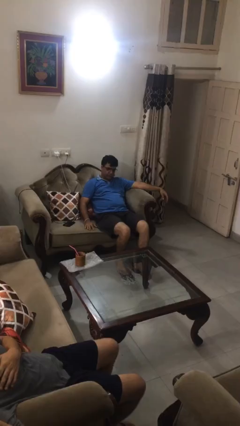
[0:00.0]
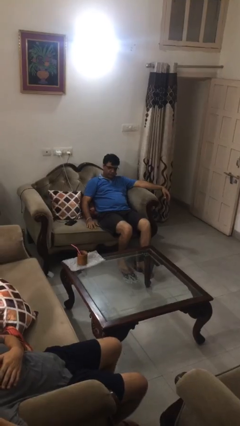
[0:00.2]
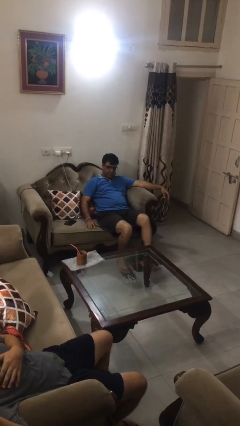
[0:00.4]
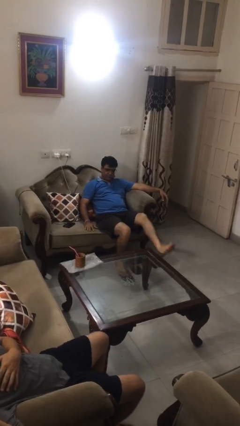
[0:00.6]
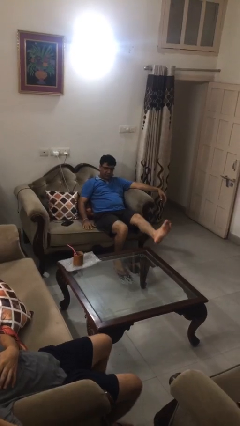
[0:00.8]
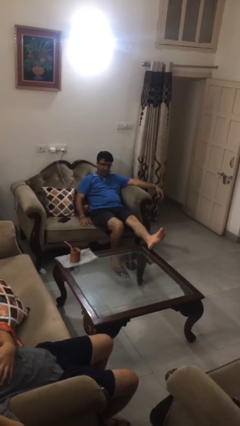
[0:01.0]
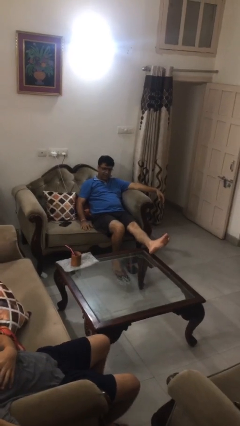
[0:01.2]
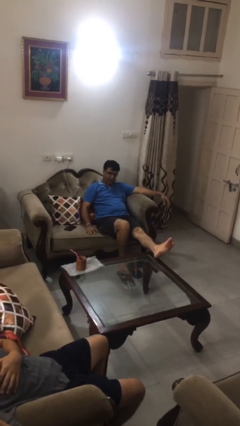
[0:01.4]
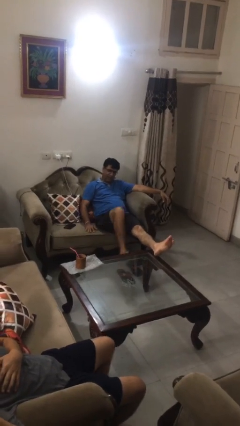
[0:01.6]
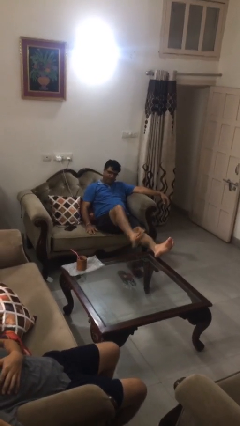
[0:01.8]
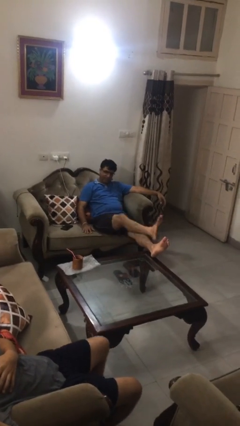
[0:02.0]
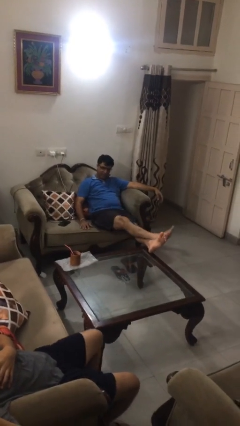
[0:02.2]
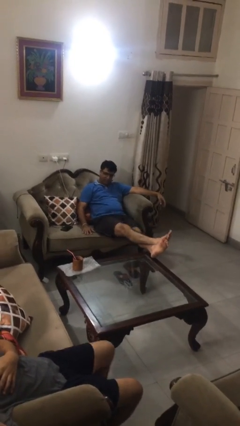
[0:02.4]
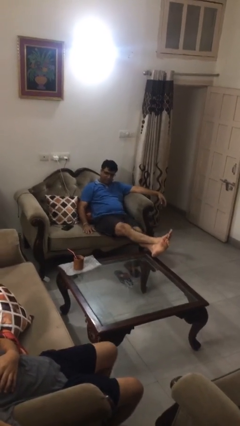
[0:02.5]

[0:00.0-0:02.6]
person puts feet up

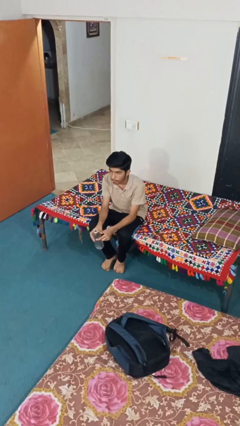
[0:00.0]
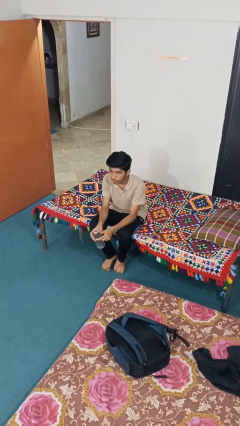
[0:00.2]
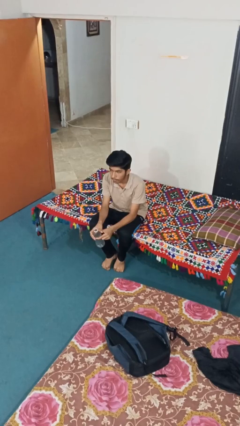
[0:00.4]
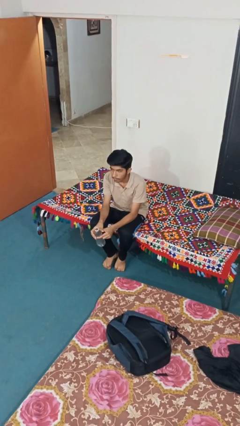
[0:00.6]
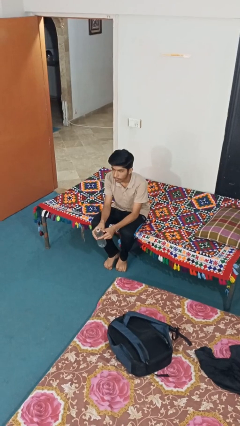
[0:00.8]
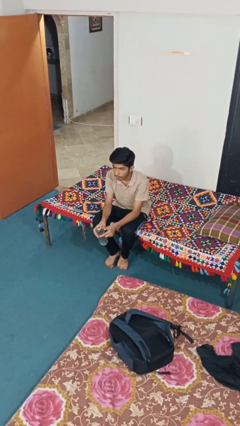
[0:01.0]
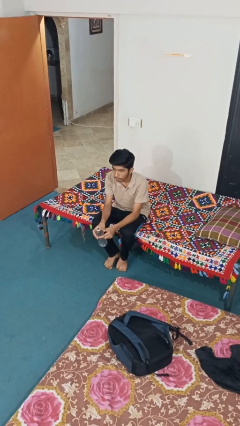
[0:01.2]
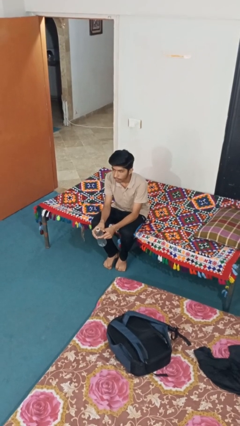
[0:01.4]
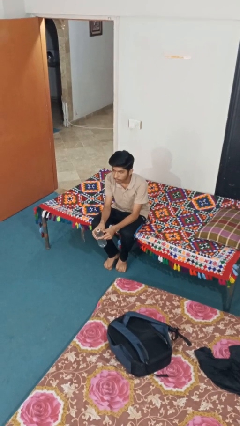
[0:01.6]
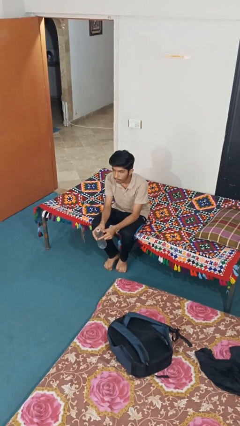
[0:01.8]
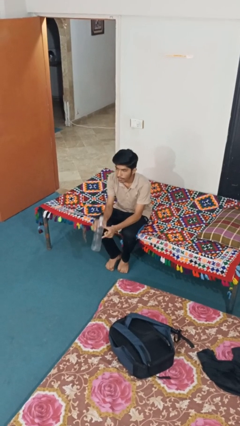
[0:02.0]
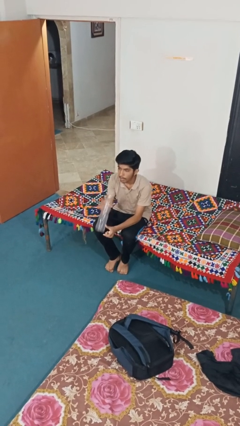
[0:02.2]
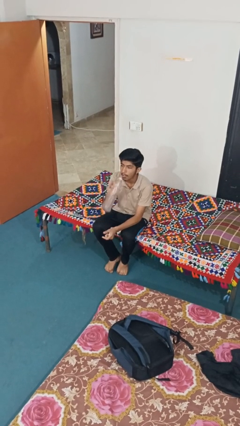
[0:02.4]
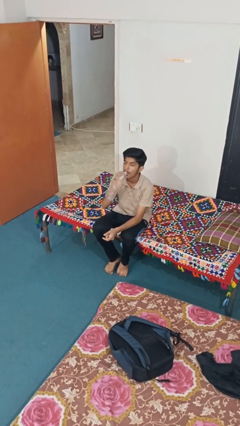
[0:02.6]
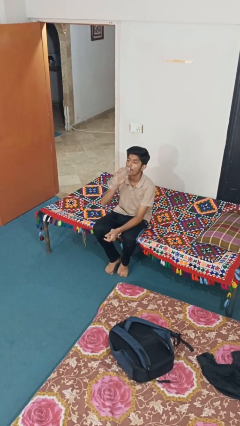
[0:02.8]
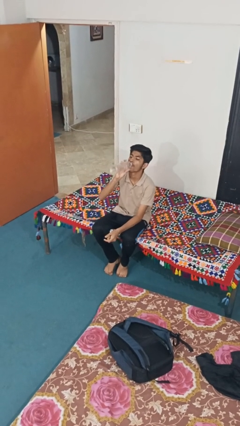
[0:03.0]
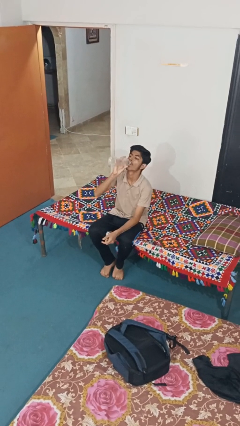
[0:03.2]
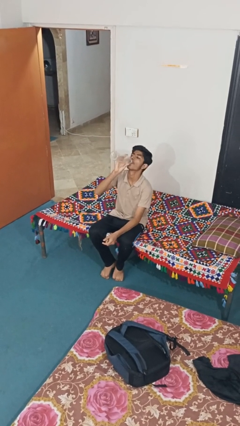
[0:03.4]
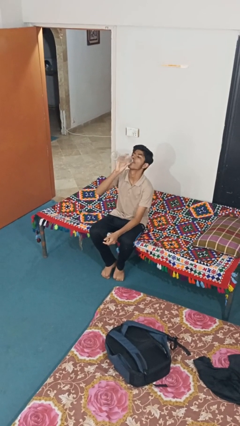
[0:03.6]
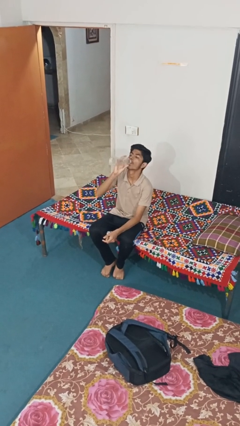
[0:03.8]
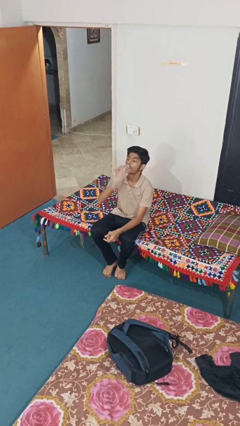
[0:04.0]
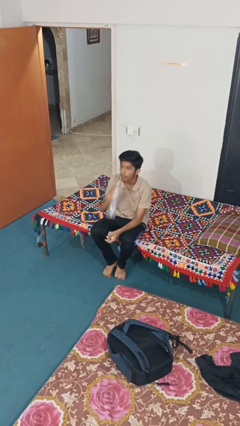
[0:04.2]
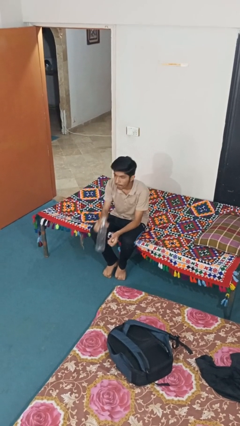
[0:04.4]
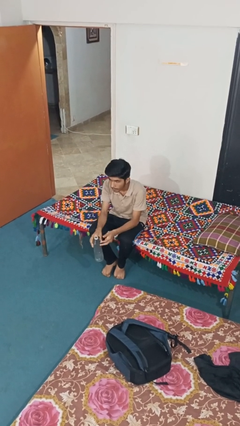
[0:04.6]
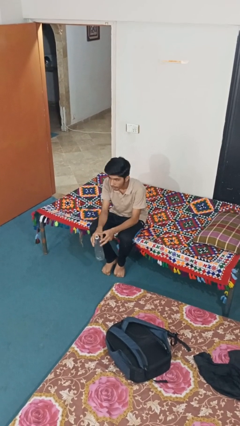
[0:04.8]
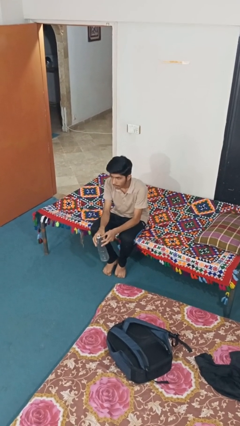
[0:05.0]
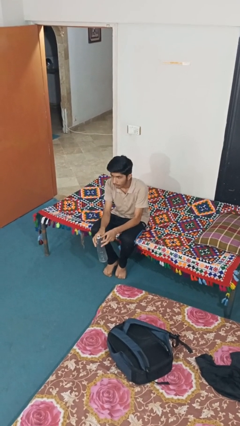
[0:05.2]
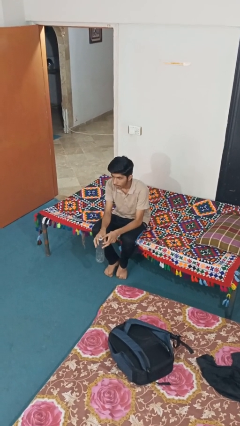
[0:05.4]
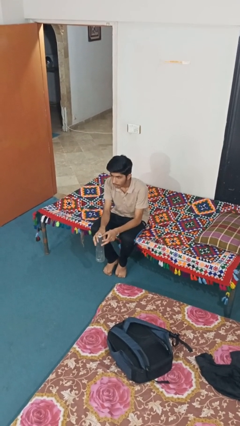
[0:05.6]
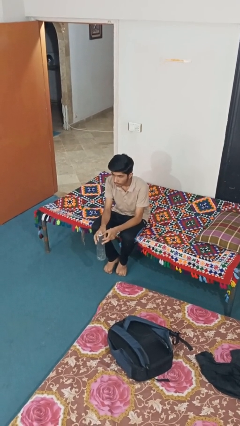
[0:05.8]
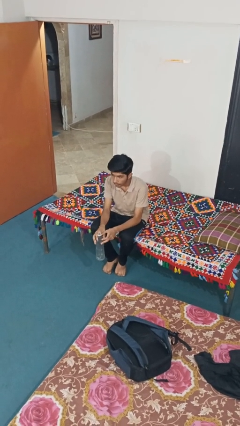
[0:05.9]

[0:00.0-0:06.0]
person drinks from bottle

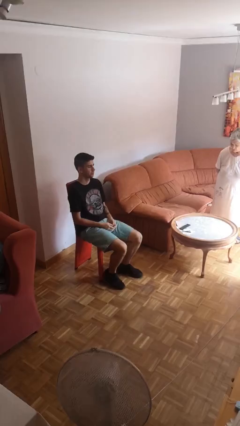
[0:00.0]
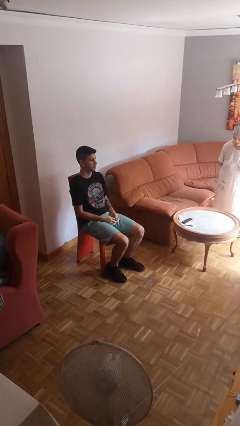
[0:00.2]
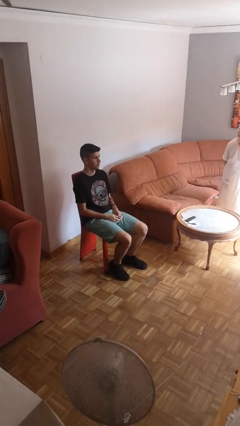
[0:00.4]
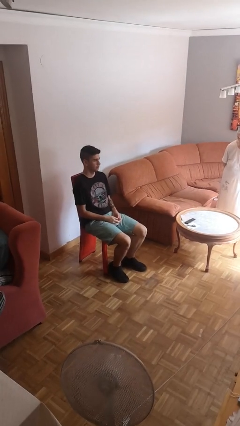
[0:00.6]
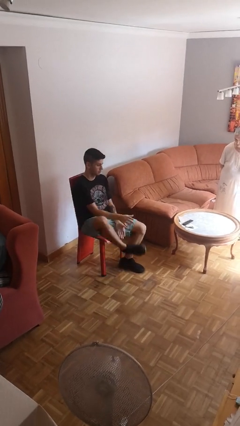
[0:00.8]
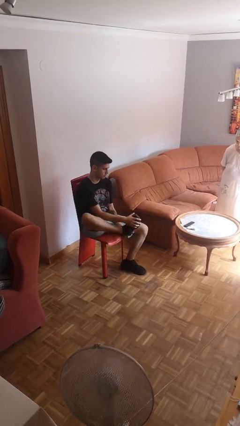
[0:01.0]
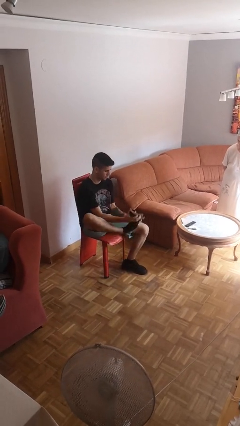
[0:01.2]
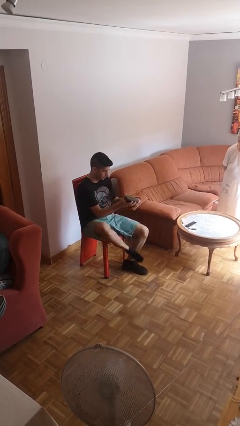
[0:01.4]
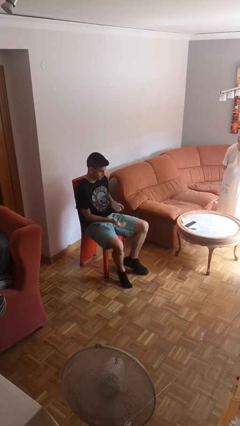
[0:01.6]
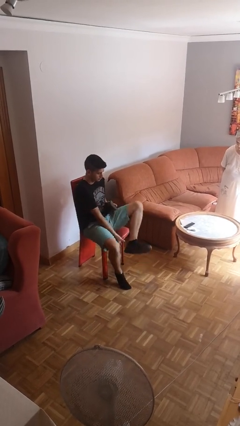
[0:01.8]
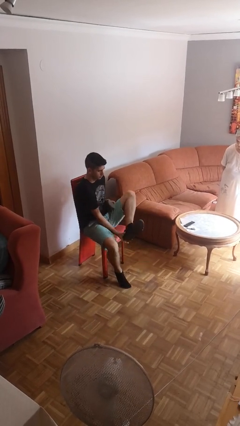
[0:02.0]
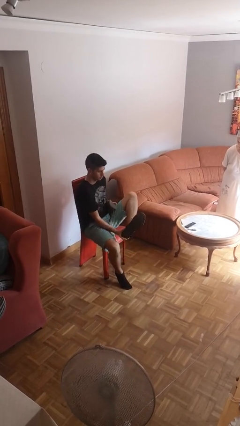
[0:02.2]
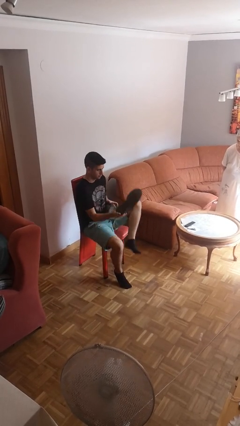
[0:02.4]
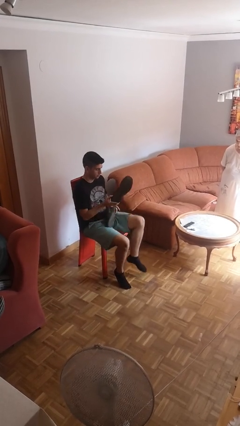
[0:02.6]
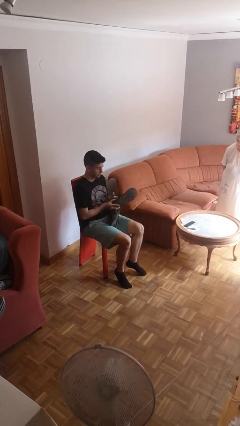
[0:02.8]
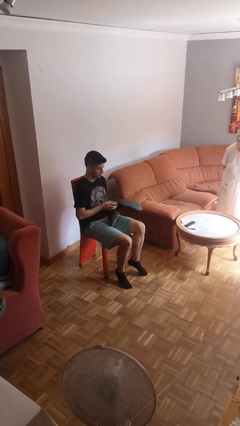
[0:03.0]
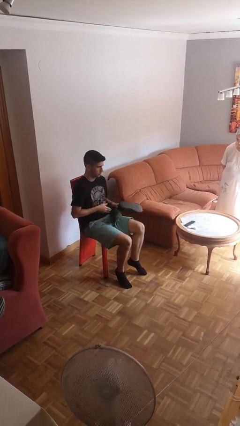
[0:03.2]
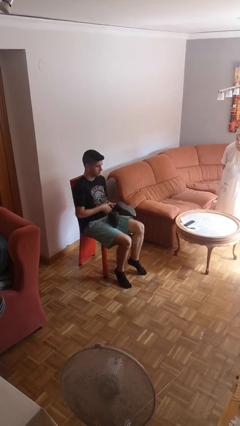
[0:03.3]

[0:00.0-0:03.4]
person takes off shoes

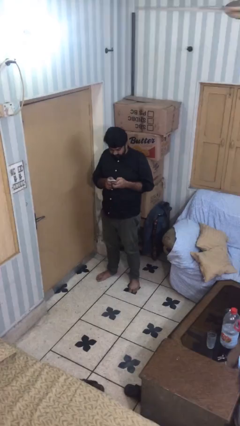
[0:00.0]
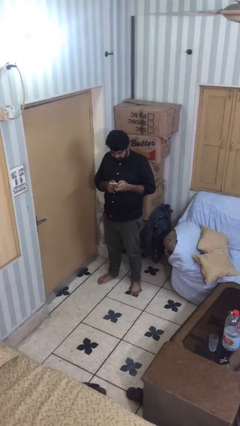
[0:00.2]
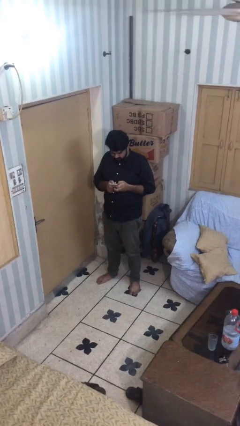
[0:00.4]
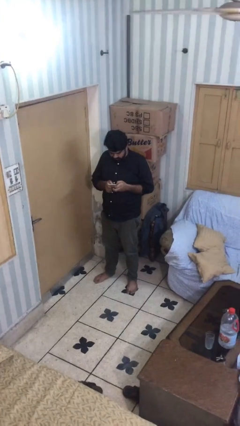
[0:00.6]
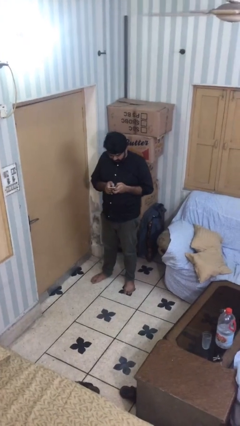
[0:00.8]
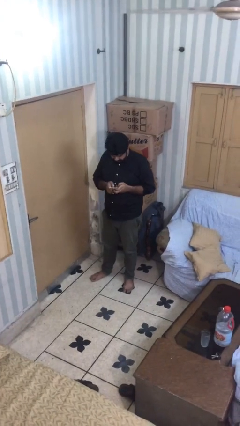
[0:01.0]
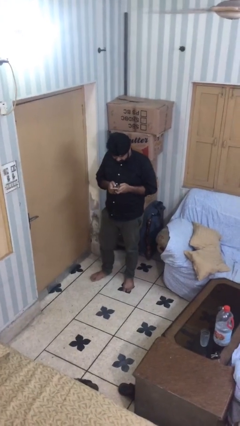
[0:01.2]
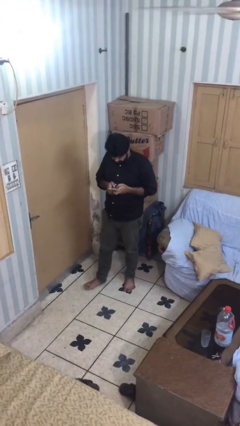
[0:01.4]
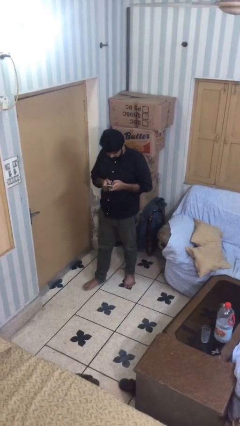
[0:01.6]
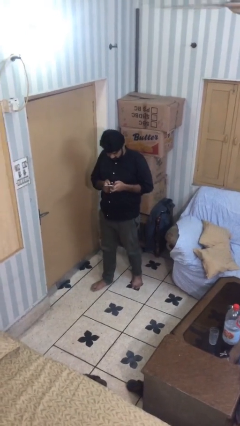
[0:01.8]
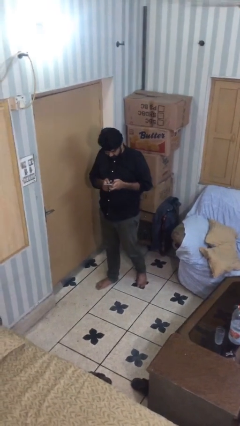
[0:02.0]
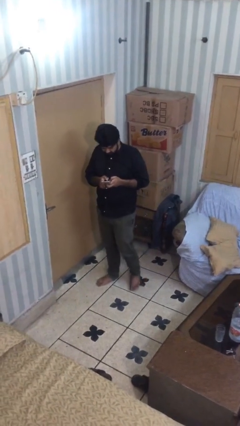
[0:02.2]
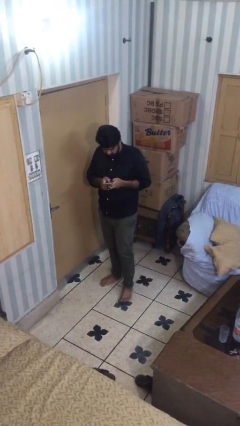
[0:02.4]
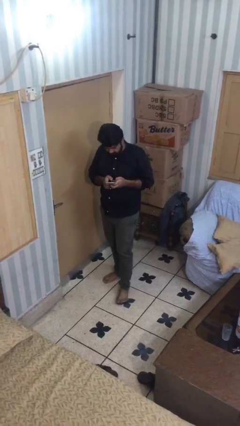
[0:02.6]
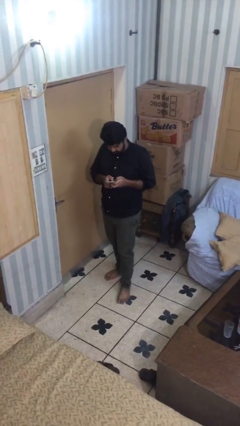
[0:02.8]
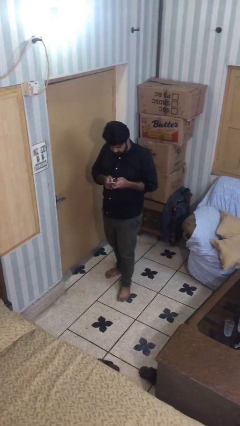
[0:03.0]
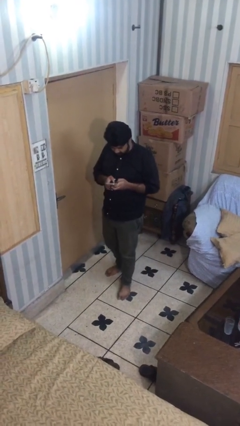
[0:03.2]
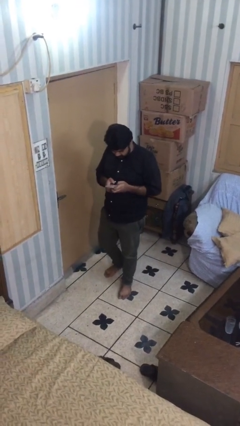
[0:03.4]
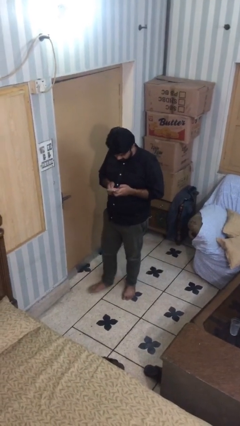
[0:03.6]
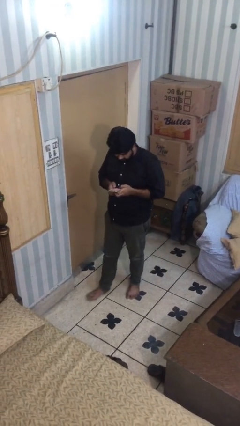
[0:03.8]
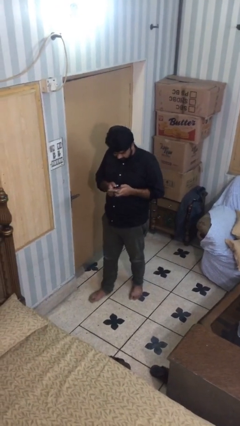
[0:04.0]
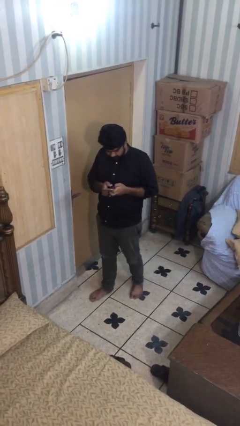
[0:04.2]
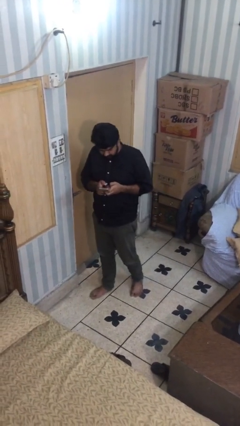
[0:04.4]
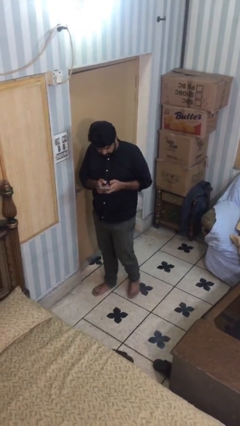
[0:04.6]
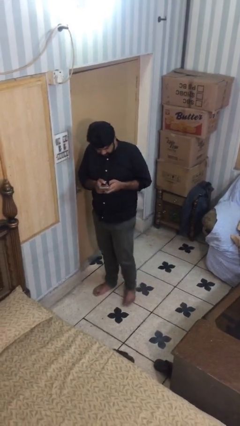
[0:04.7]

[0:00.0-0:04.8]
person texts on phone

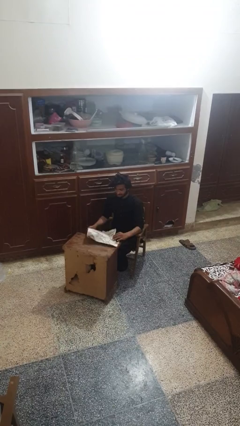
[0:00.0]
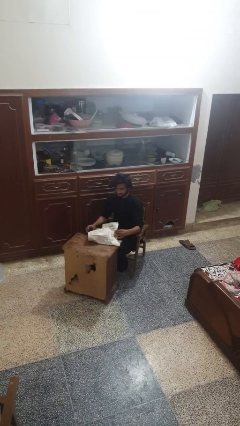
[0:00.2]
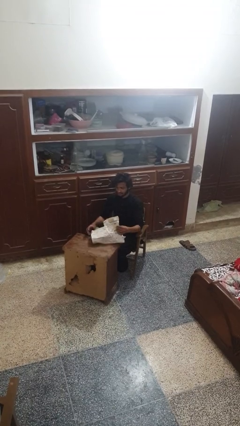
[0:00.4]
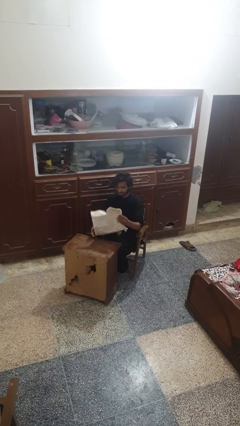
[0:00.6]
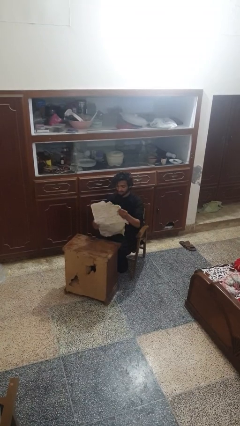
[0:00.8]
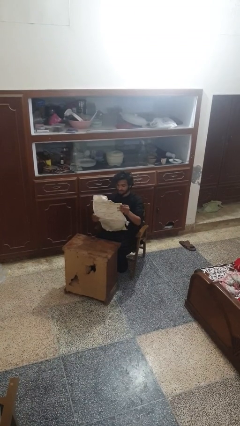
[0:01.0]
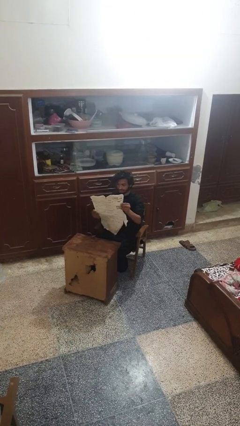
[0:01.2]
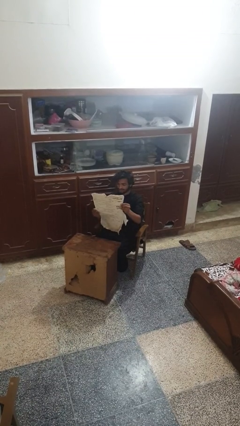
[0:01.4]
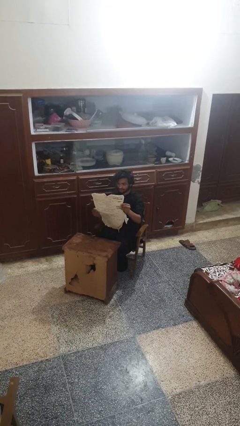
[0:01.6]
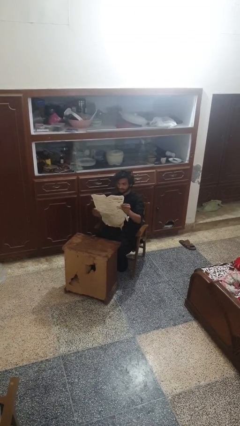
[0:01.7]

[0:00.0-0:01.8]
person reads newspaper
